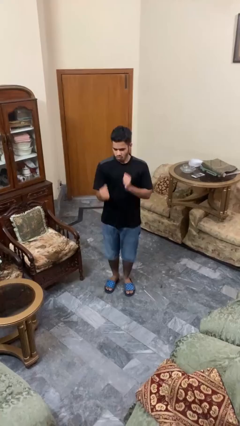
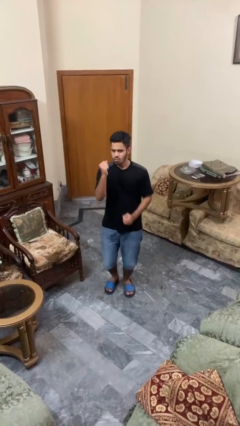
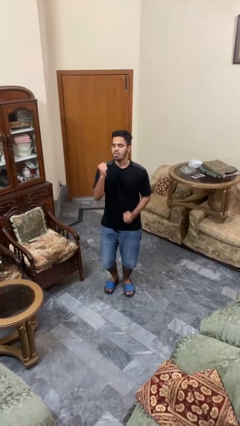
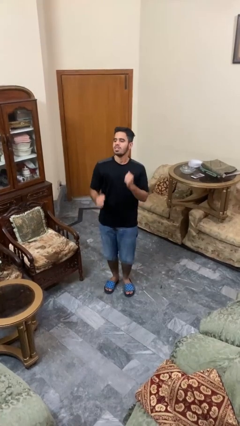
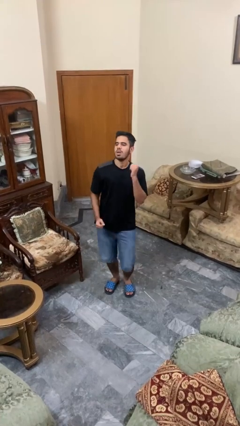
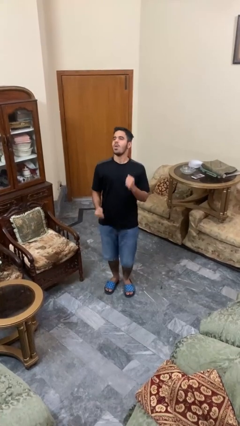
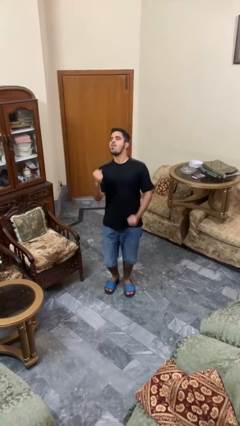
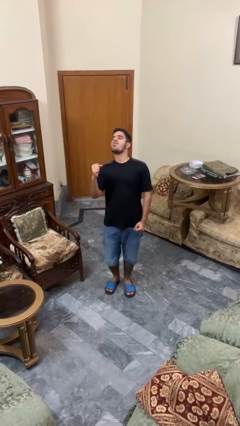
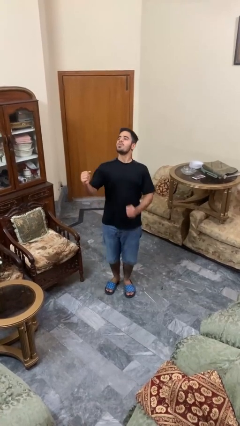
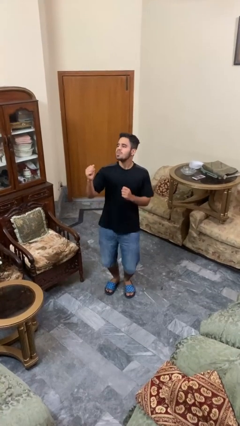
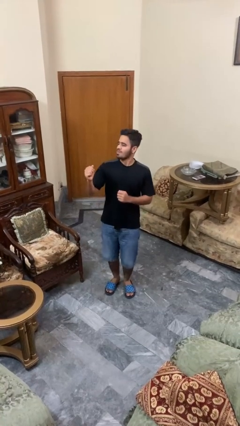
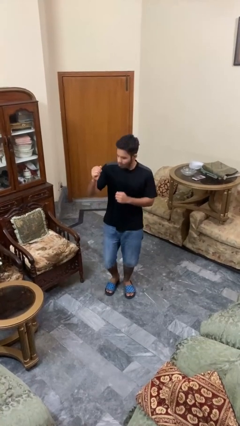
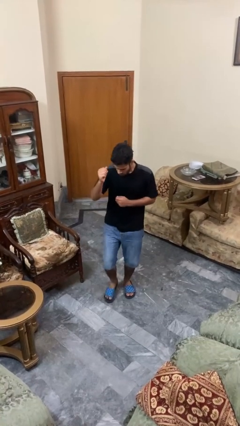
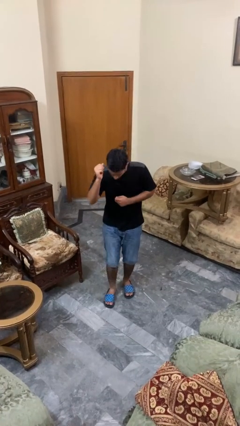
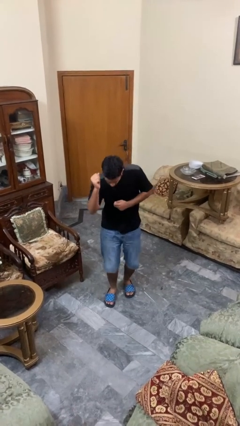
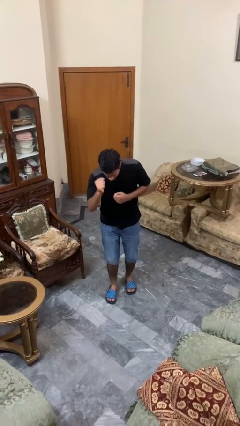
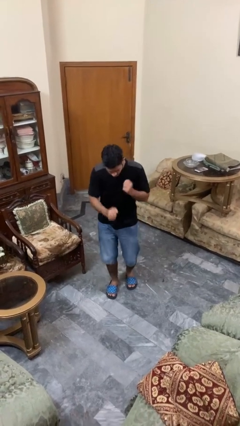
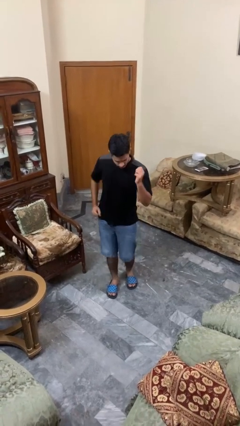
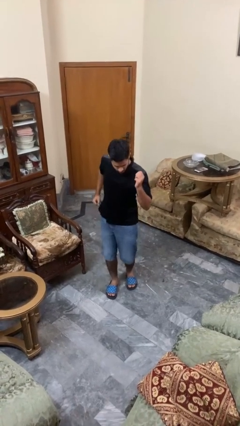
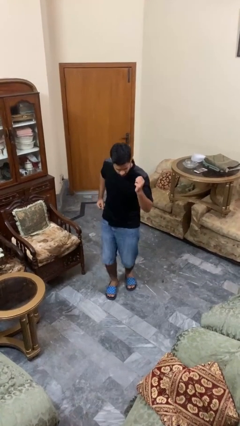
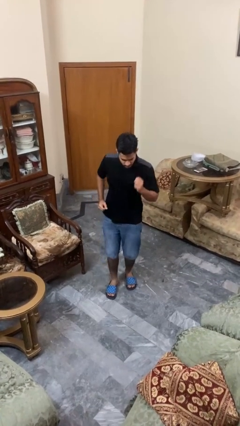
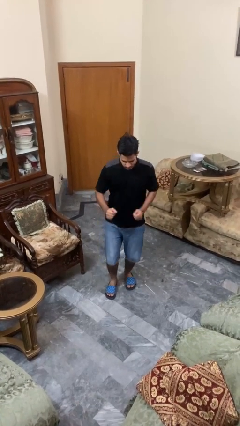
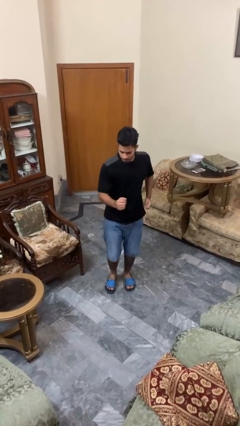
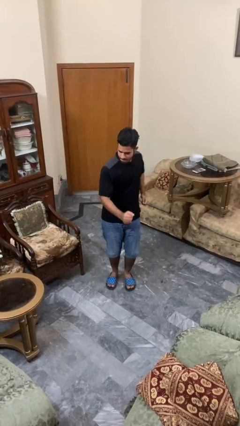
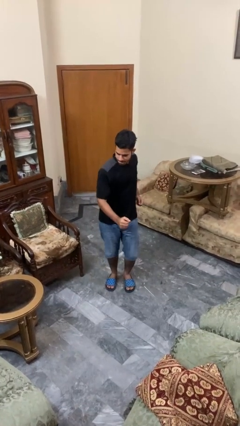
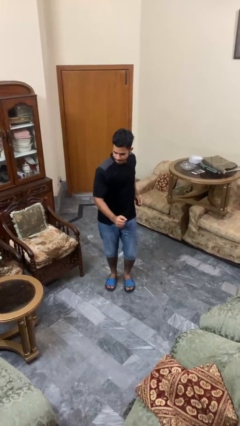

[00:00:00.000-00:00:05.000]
person dances in place

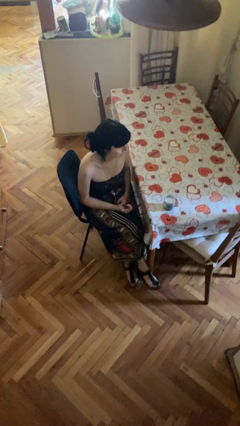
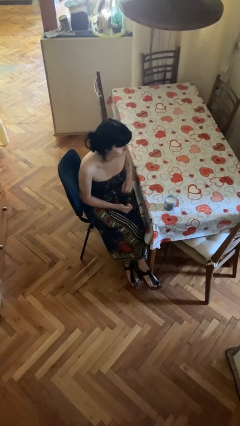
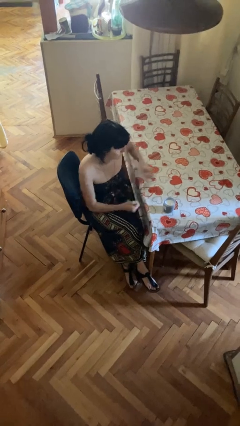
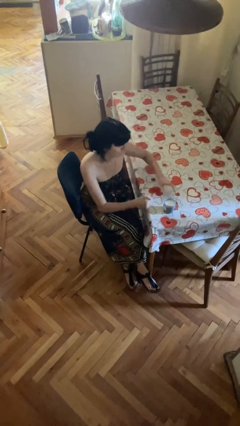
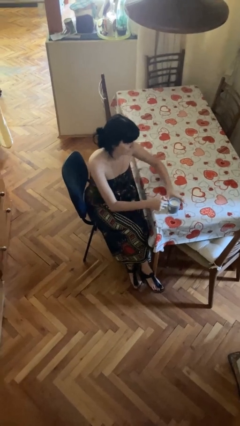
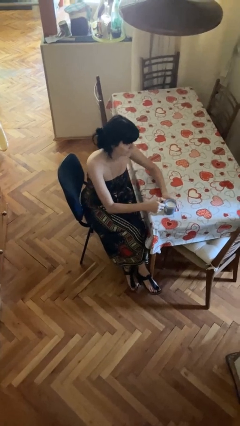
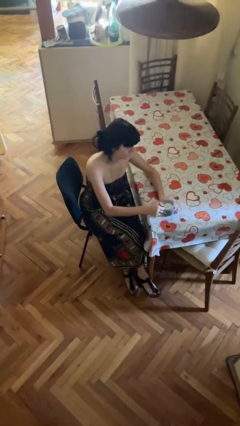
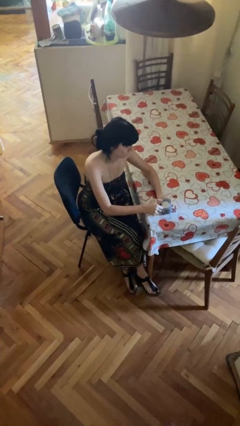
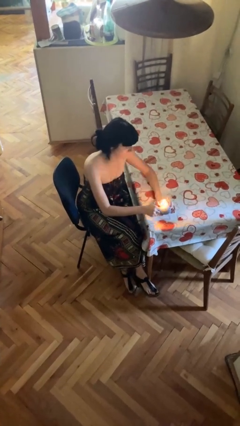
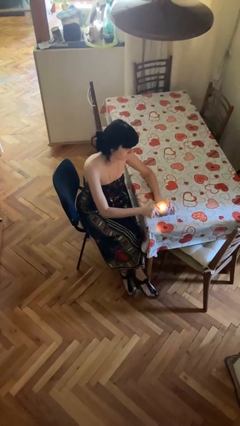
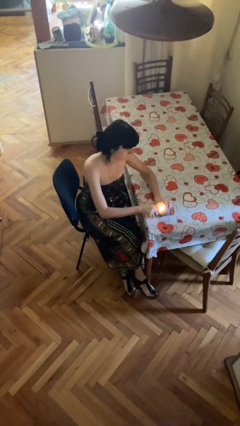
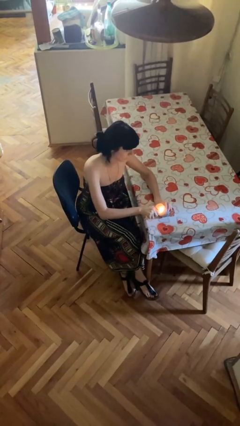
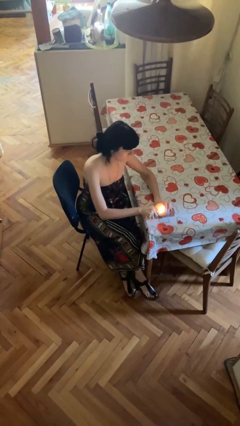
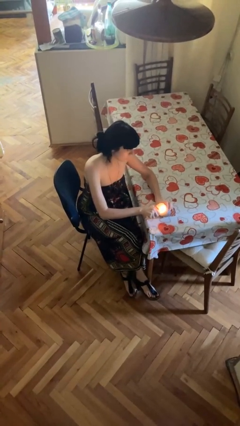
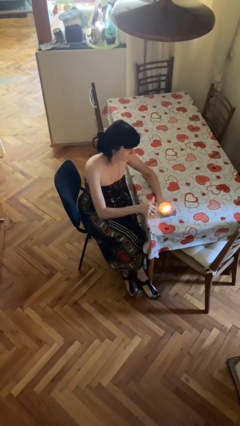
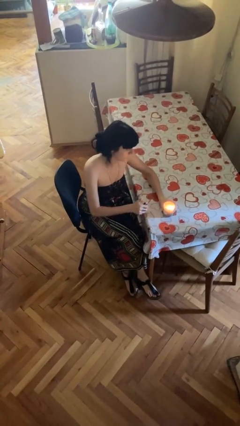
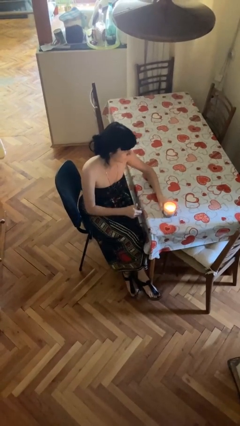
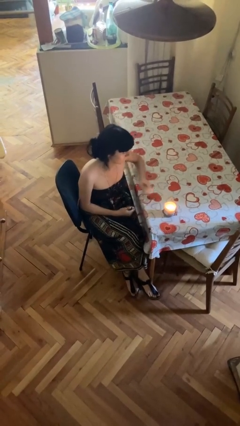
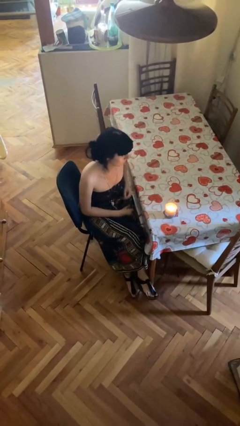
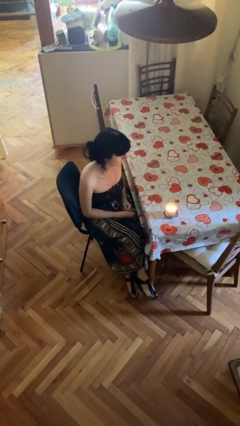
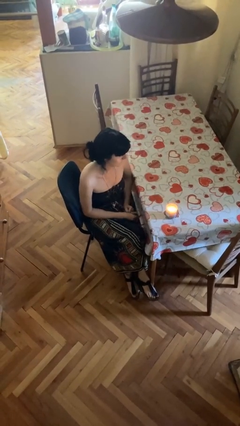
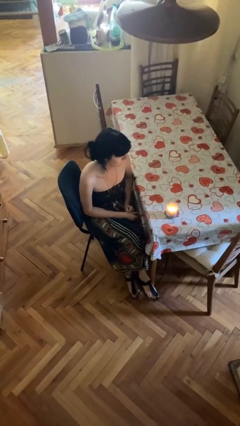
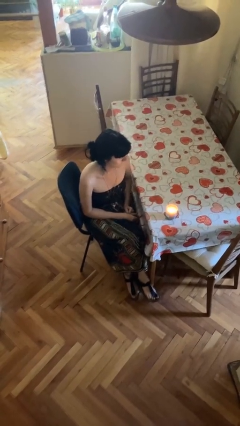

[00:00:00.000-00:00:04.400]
person lights candle

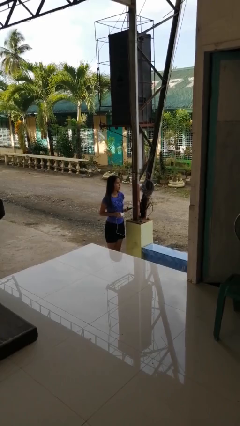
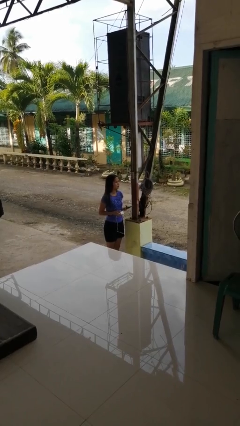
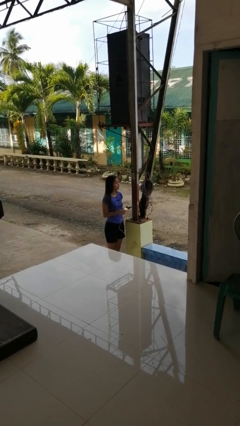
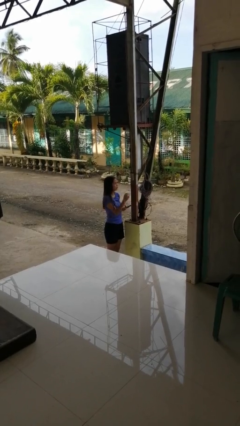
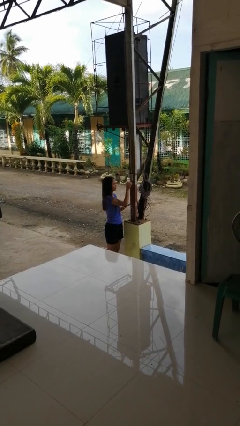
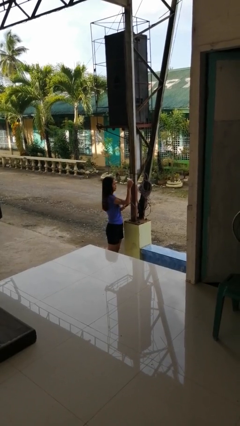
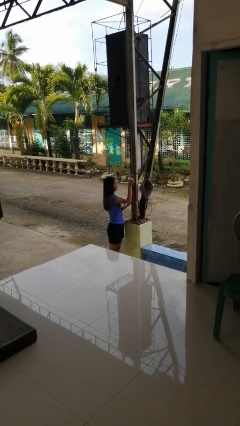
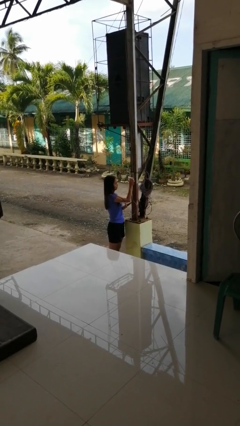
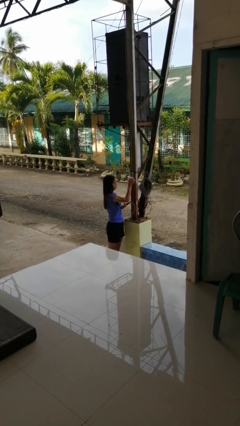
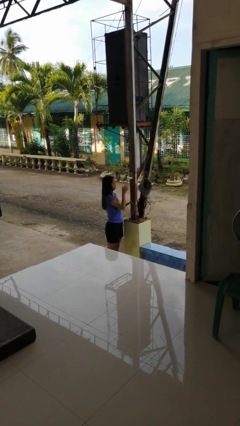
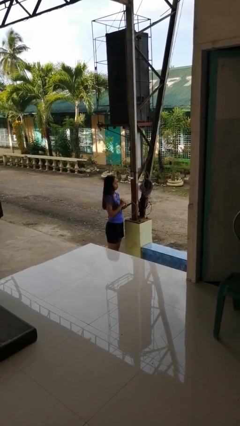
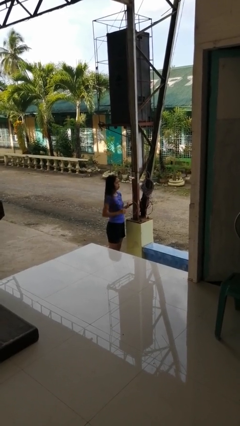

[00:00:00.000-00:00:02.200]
person plugs into electrical socket

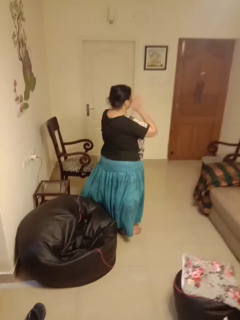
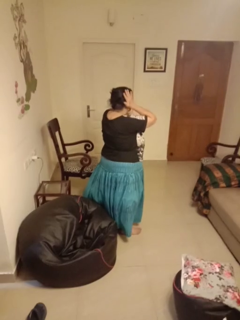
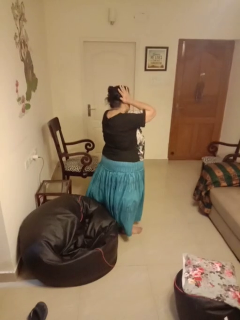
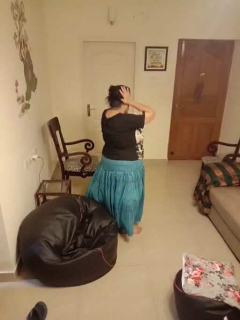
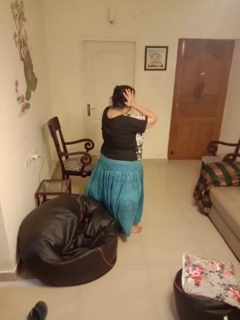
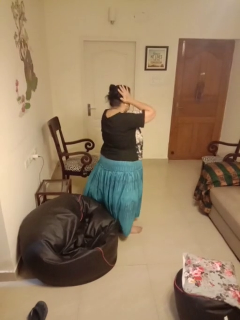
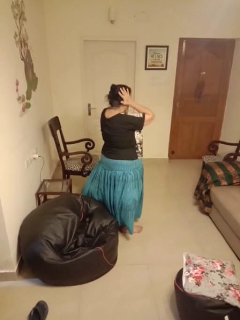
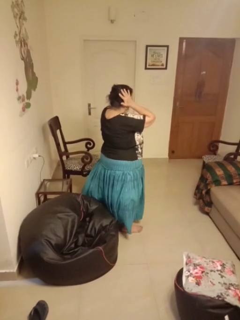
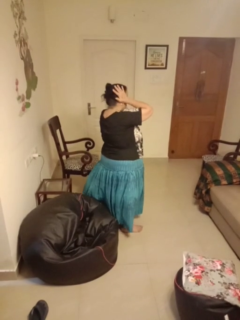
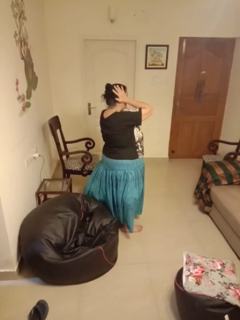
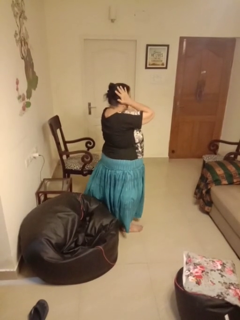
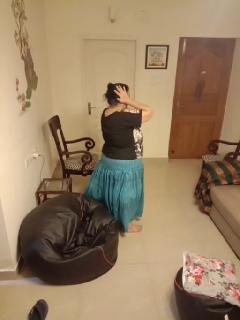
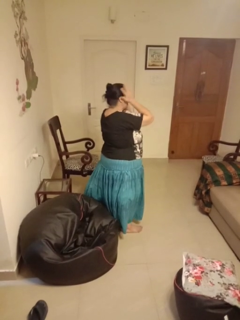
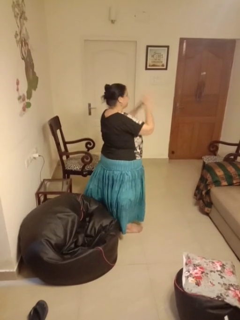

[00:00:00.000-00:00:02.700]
person puts fingers in ear

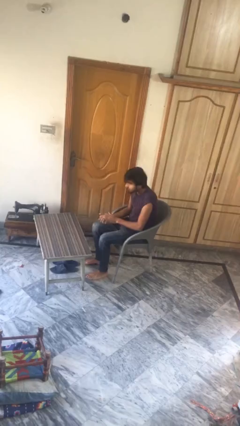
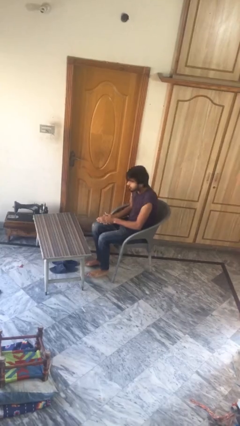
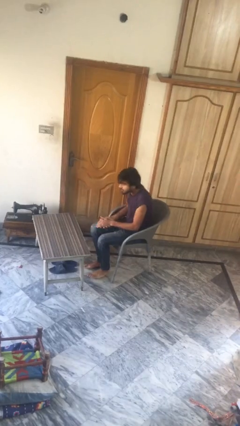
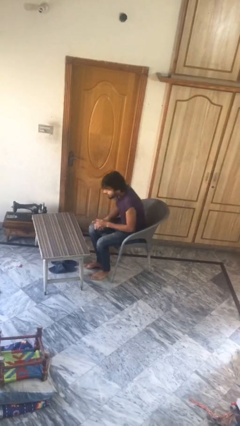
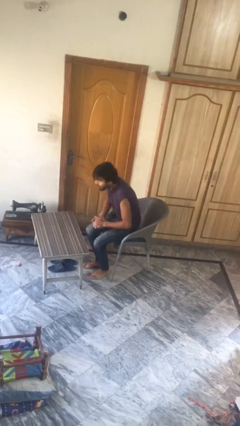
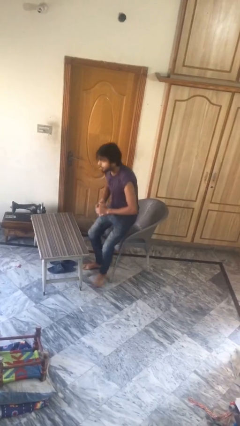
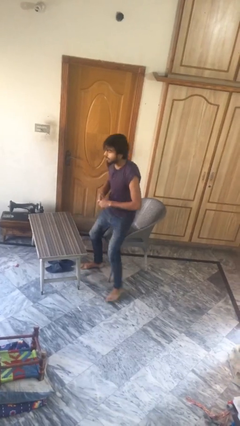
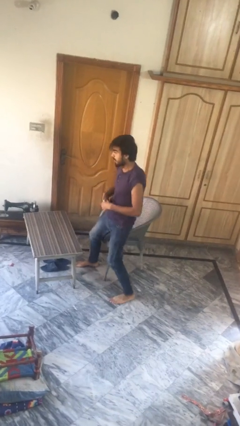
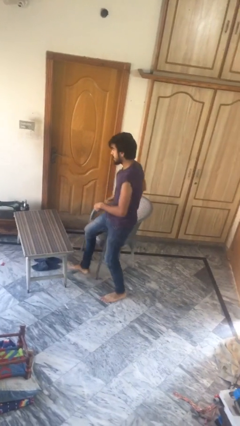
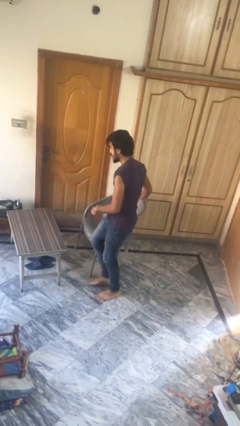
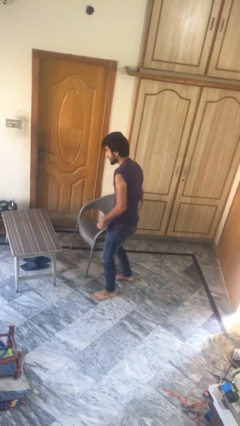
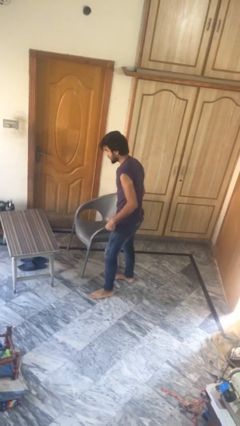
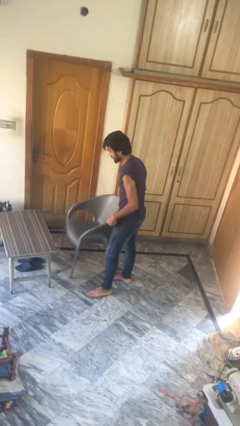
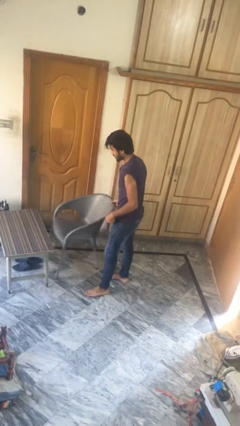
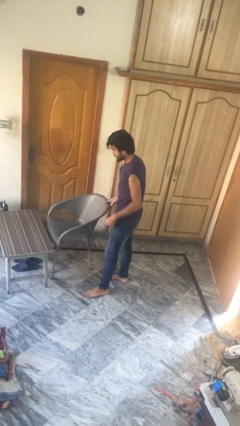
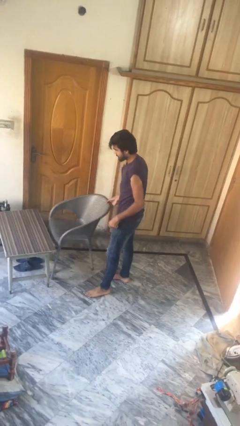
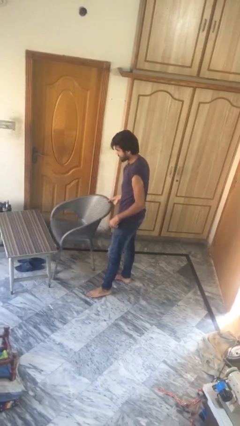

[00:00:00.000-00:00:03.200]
person stands up

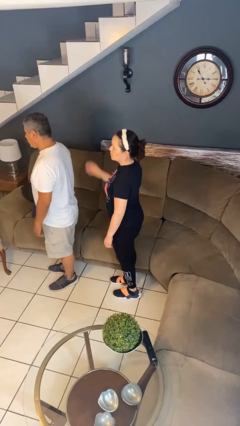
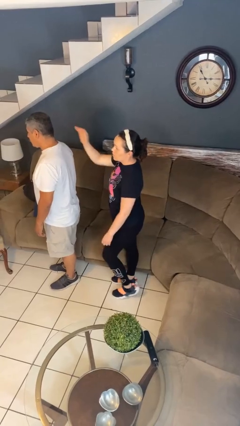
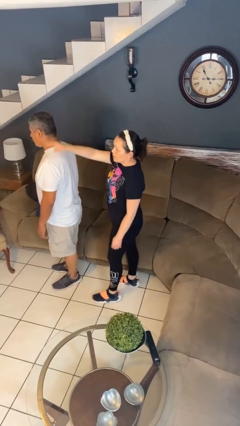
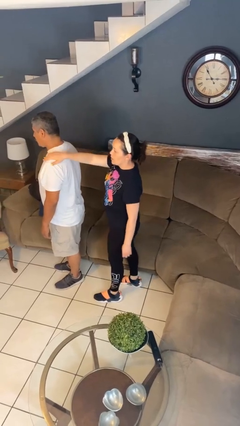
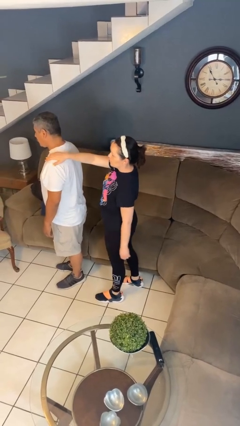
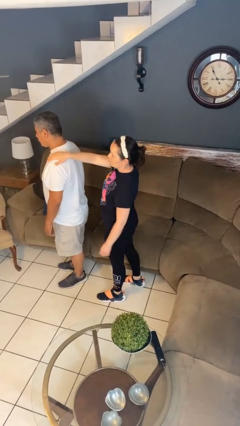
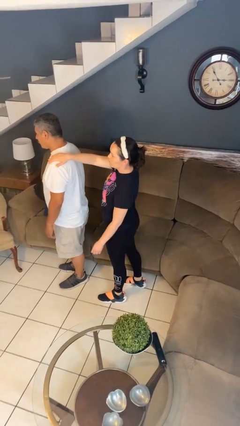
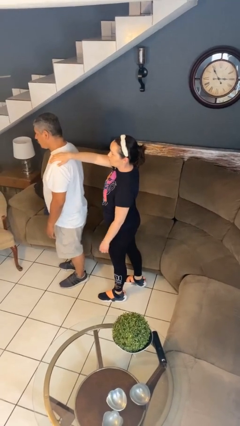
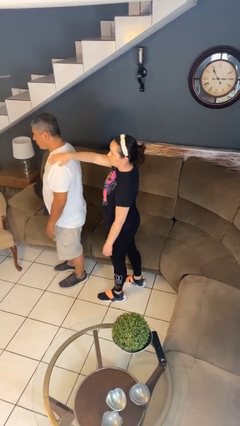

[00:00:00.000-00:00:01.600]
person grabs person by shoulder
